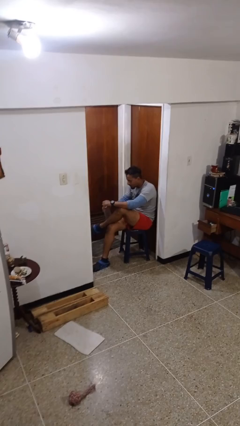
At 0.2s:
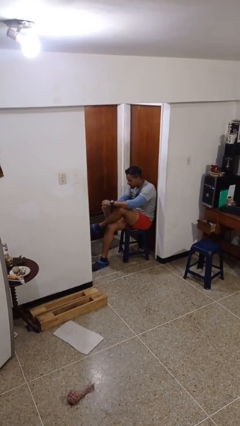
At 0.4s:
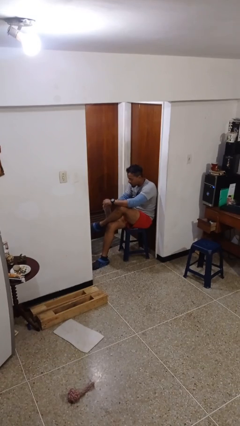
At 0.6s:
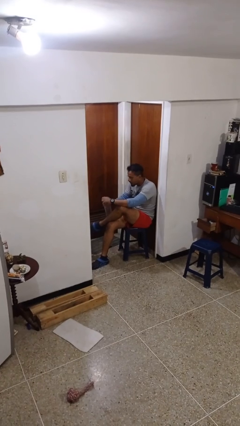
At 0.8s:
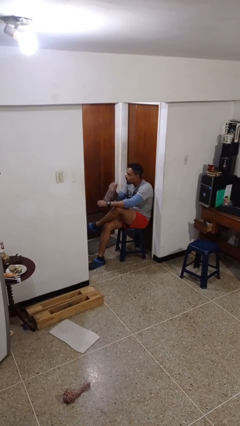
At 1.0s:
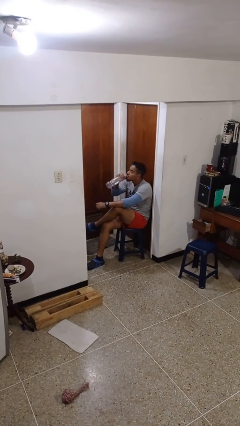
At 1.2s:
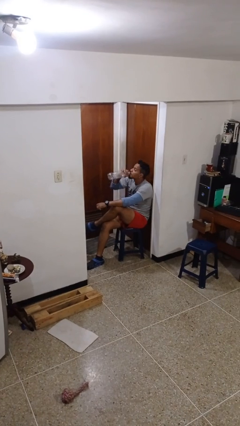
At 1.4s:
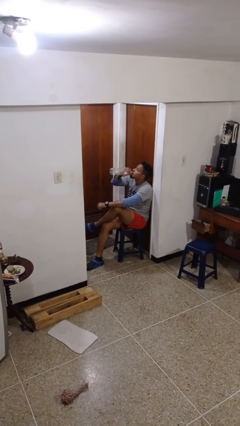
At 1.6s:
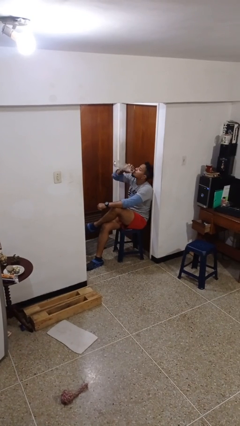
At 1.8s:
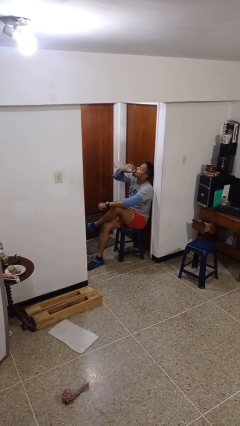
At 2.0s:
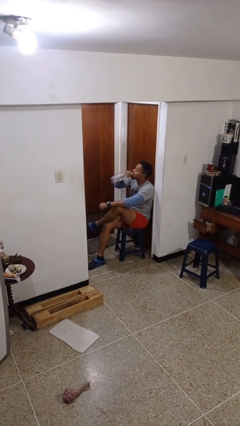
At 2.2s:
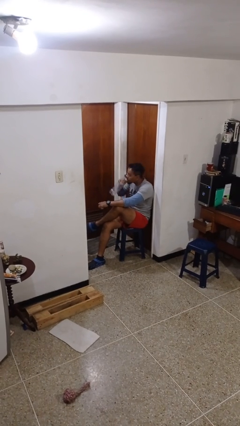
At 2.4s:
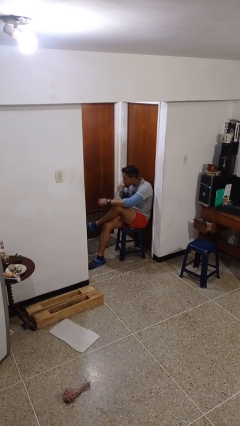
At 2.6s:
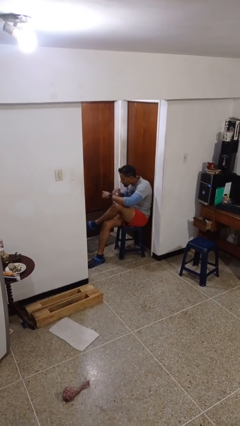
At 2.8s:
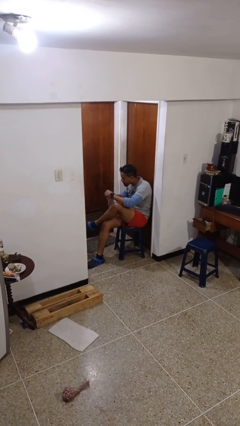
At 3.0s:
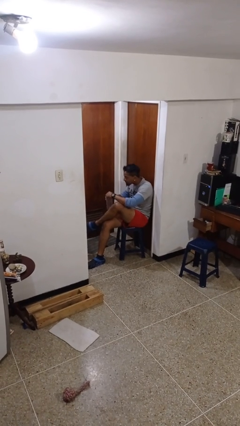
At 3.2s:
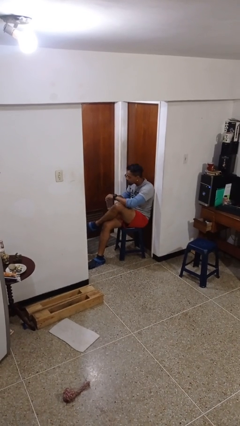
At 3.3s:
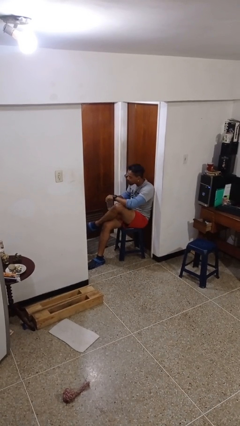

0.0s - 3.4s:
person drinks from bottle

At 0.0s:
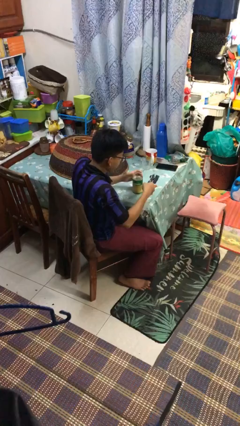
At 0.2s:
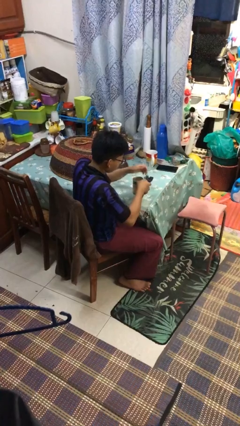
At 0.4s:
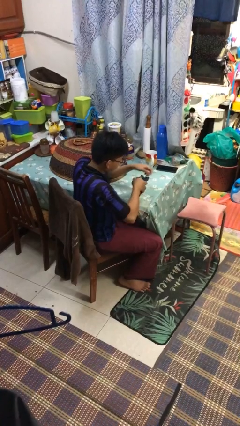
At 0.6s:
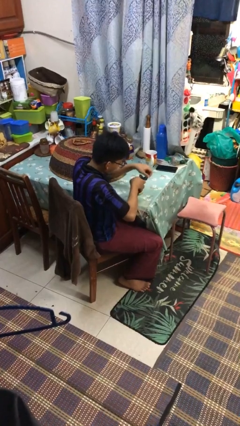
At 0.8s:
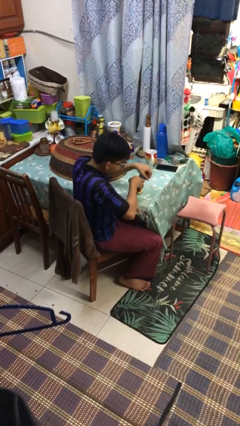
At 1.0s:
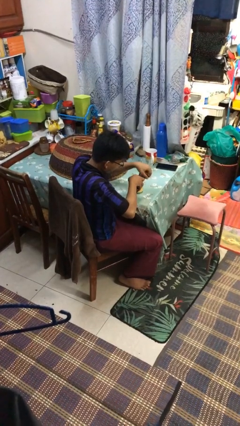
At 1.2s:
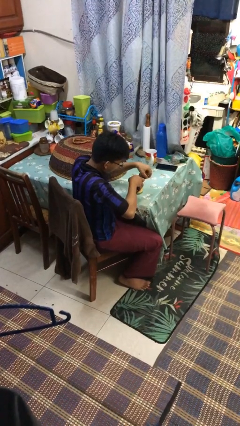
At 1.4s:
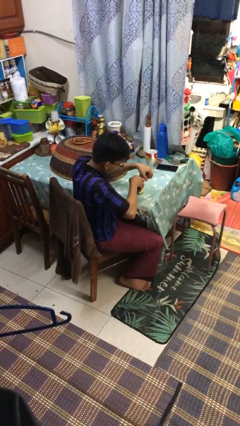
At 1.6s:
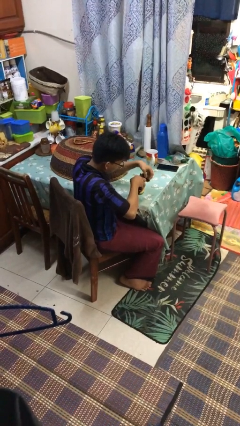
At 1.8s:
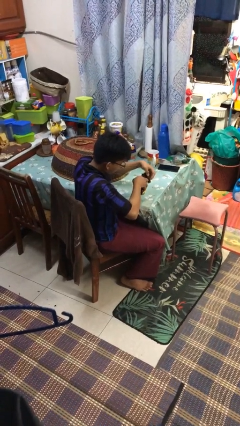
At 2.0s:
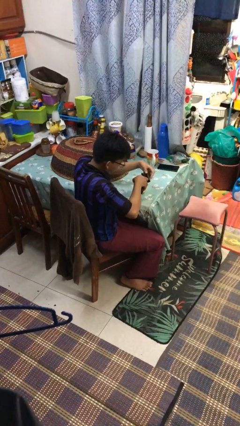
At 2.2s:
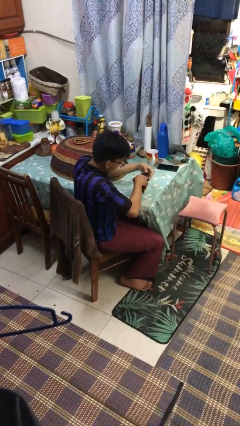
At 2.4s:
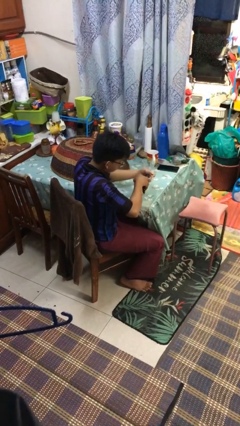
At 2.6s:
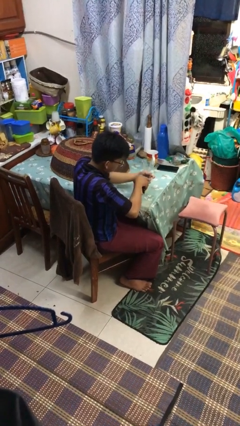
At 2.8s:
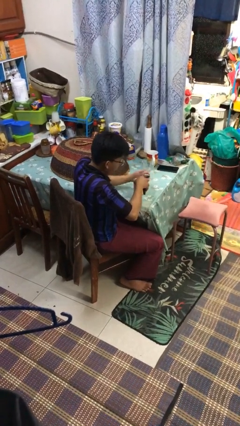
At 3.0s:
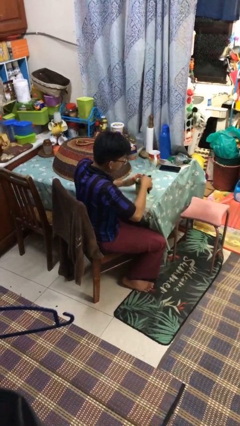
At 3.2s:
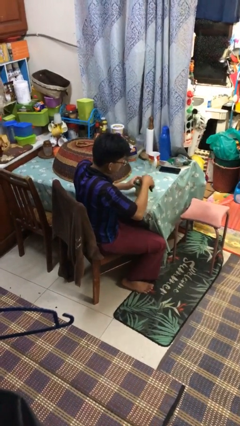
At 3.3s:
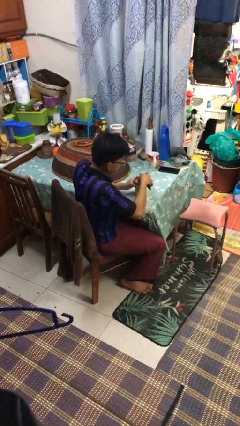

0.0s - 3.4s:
person opens can with can opener

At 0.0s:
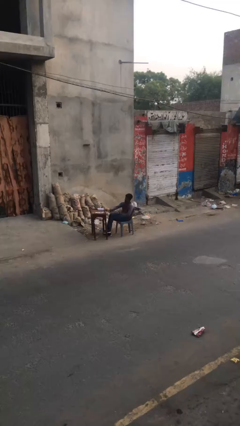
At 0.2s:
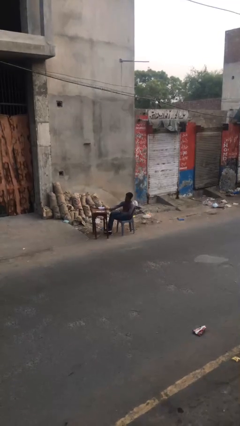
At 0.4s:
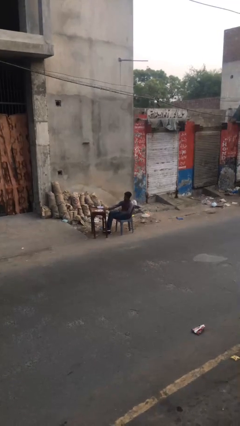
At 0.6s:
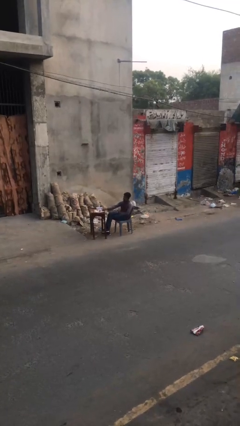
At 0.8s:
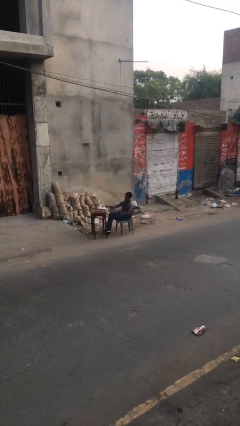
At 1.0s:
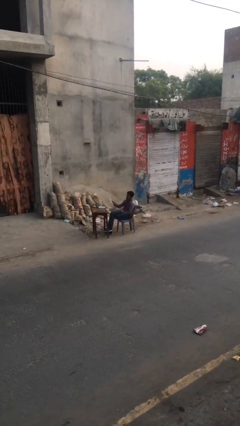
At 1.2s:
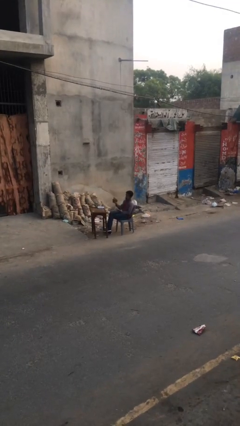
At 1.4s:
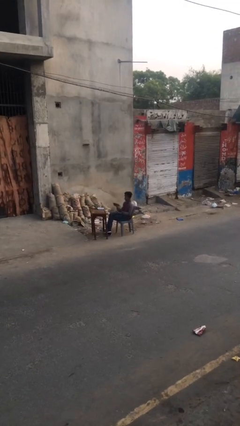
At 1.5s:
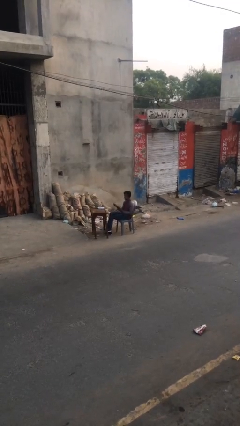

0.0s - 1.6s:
person picks up object from table

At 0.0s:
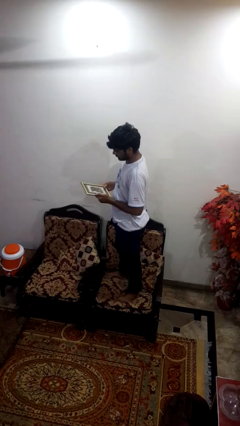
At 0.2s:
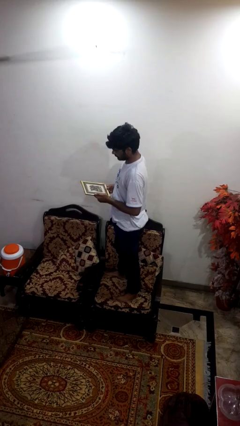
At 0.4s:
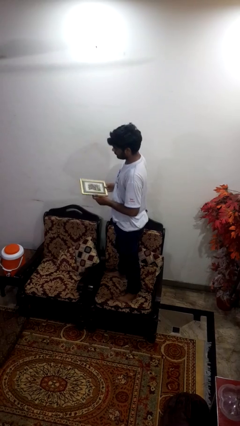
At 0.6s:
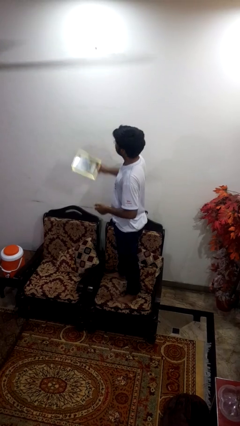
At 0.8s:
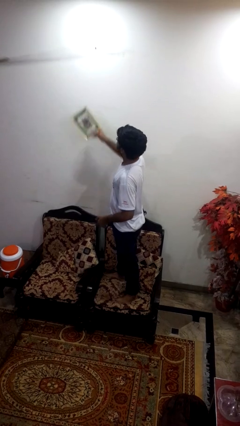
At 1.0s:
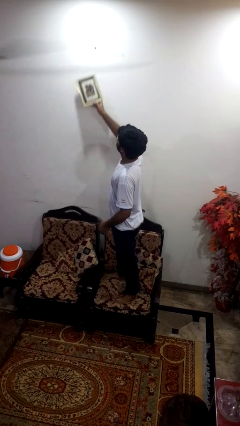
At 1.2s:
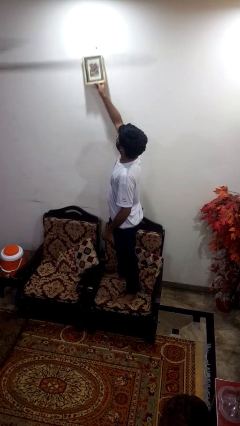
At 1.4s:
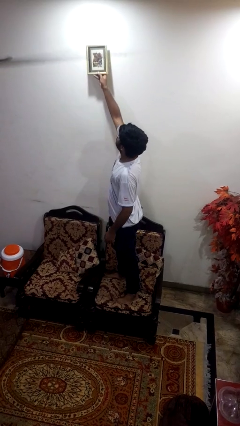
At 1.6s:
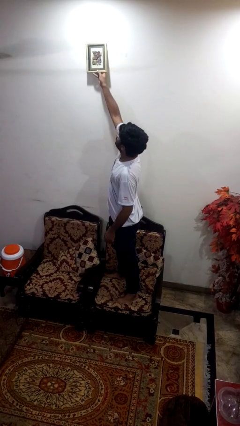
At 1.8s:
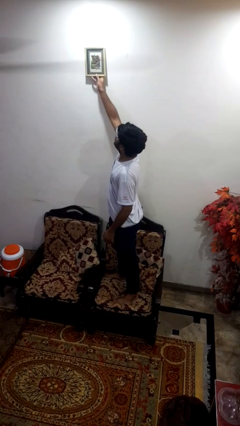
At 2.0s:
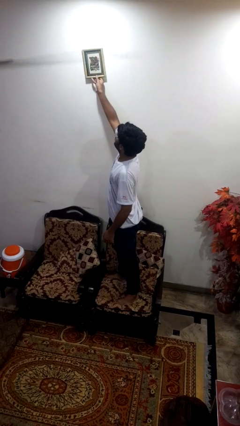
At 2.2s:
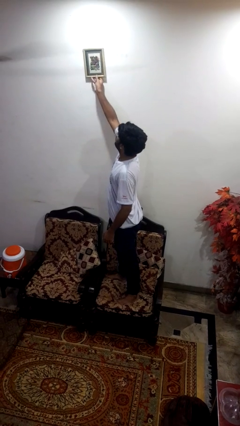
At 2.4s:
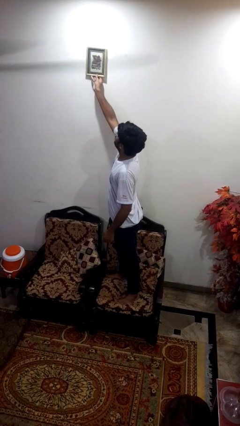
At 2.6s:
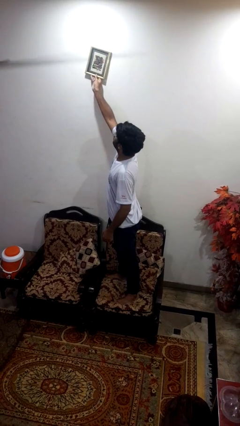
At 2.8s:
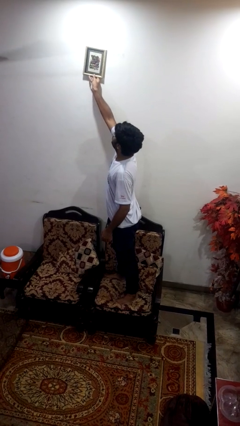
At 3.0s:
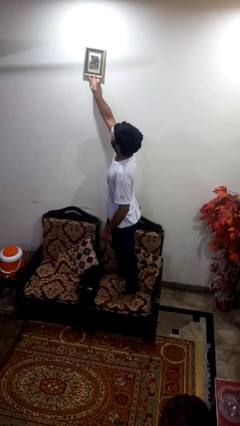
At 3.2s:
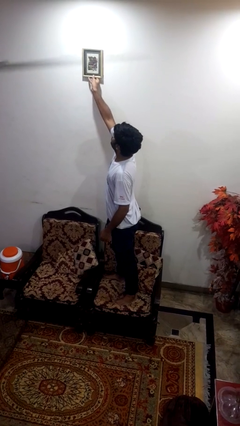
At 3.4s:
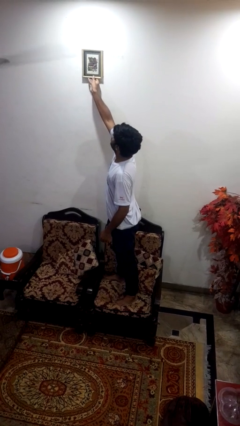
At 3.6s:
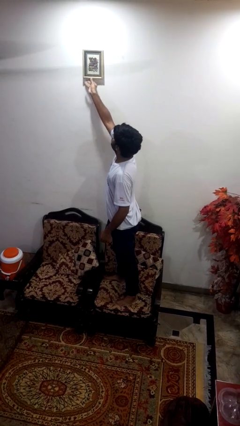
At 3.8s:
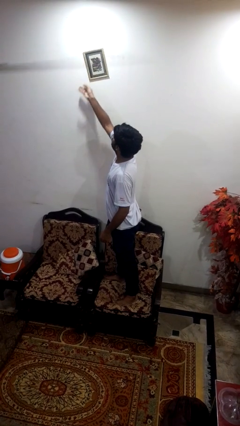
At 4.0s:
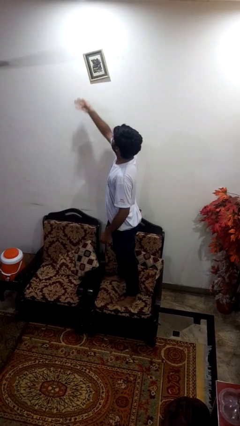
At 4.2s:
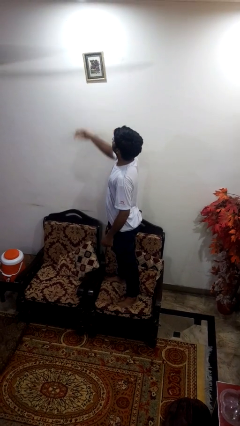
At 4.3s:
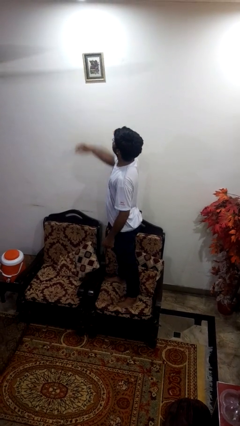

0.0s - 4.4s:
person puts up picture frame

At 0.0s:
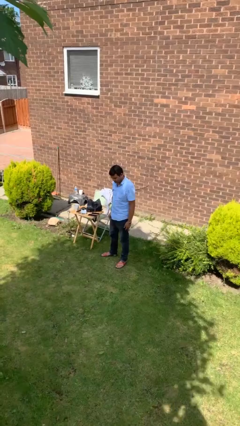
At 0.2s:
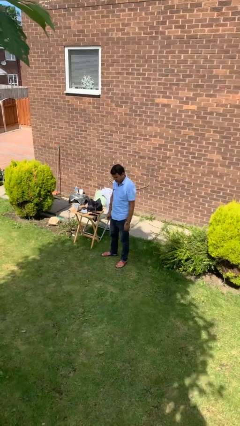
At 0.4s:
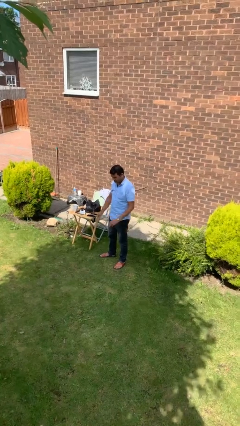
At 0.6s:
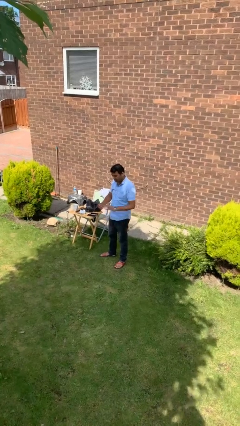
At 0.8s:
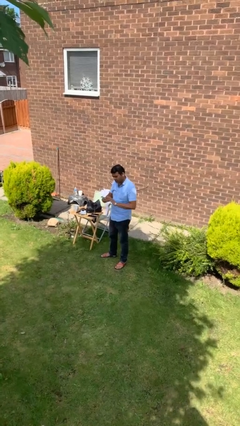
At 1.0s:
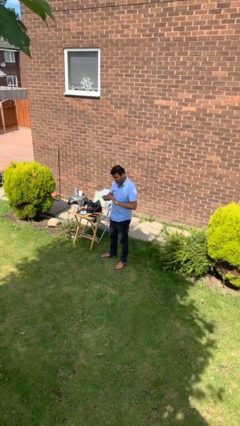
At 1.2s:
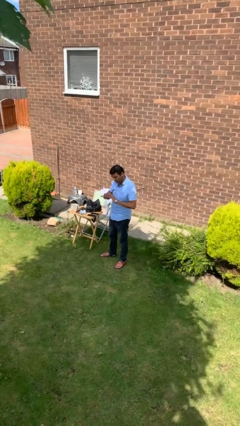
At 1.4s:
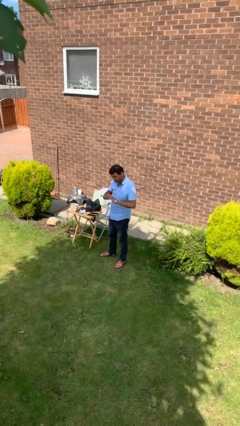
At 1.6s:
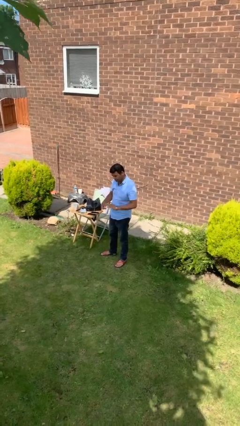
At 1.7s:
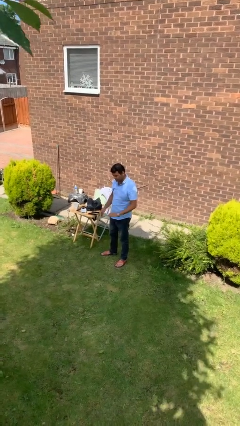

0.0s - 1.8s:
person puts on ring

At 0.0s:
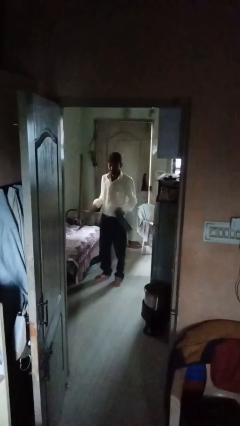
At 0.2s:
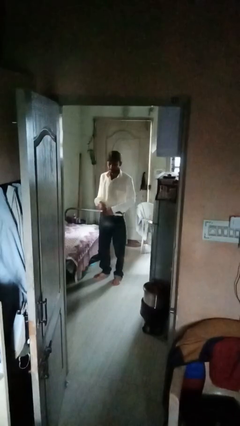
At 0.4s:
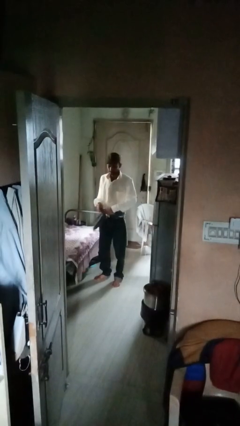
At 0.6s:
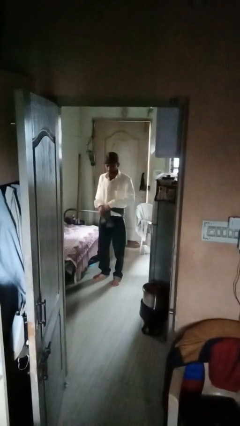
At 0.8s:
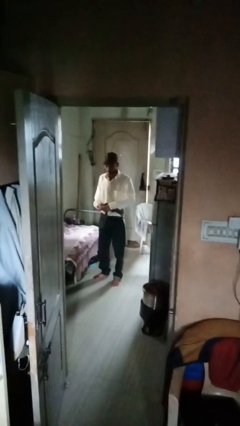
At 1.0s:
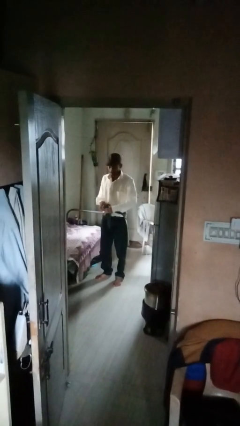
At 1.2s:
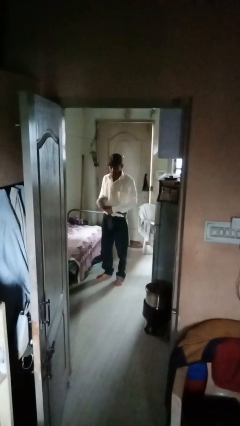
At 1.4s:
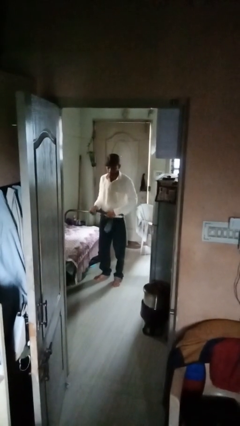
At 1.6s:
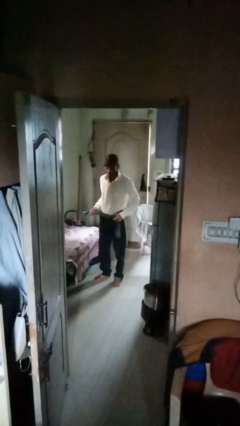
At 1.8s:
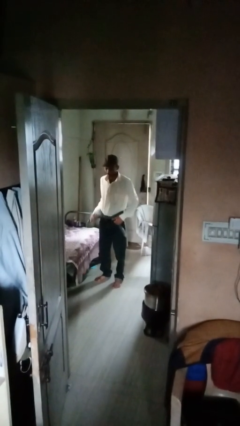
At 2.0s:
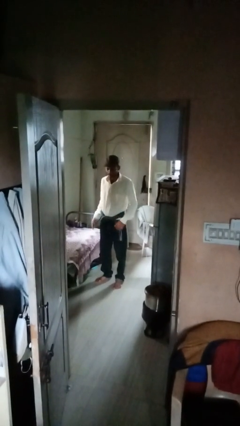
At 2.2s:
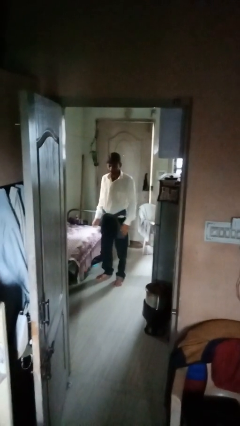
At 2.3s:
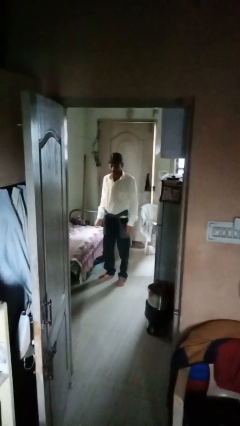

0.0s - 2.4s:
person ties jacket around waist

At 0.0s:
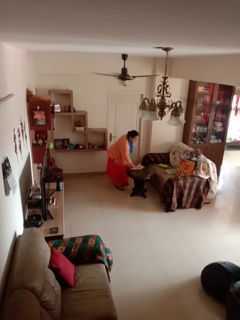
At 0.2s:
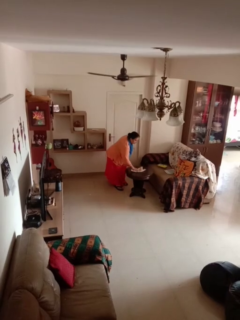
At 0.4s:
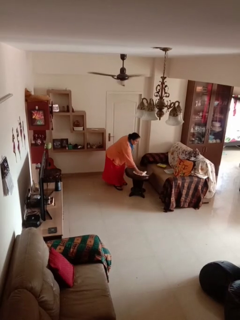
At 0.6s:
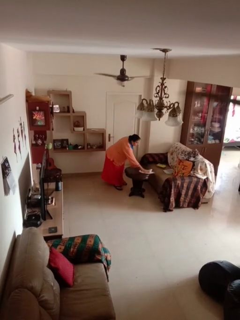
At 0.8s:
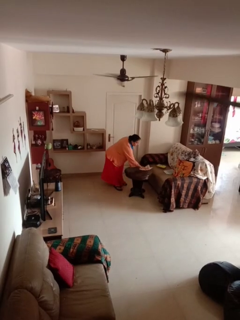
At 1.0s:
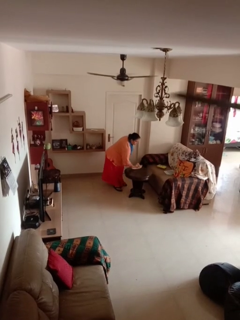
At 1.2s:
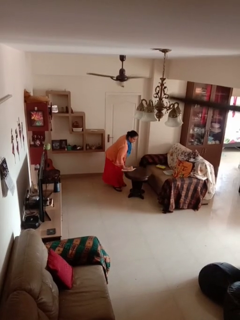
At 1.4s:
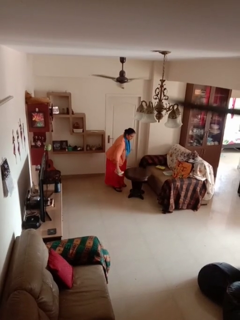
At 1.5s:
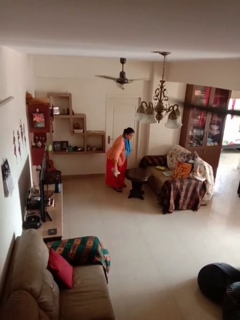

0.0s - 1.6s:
person cleans table with rag
